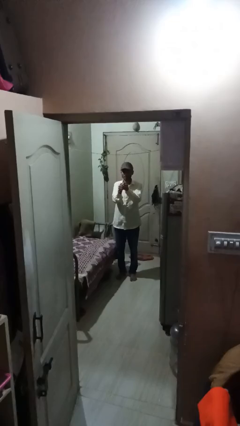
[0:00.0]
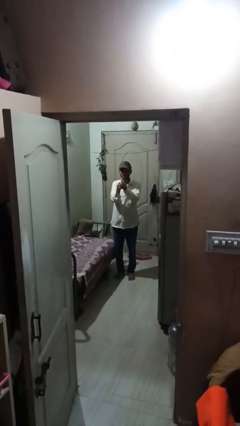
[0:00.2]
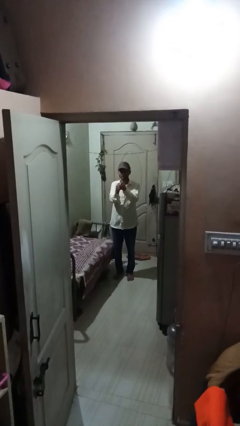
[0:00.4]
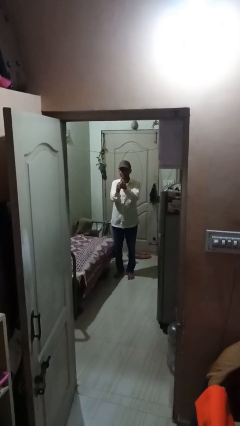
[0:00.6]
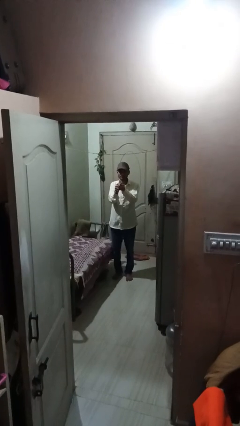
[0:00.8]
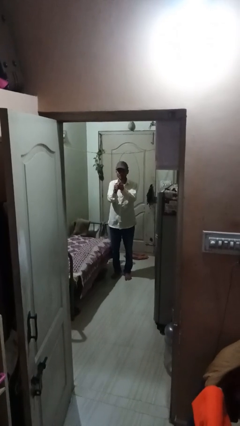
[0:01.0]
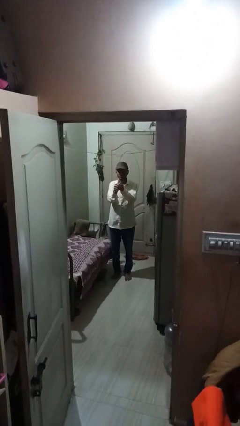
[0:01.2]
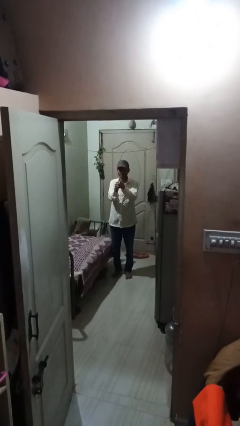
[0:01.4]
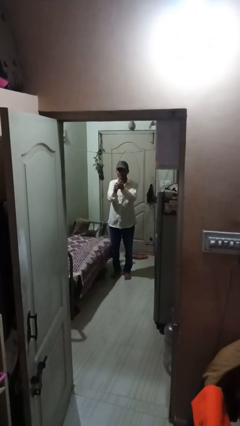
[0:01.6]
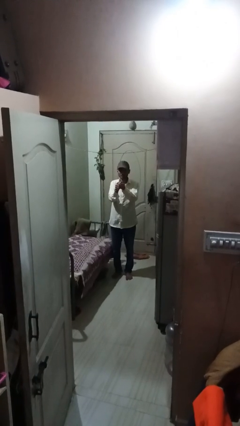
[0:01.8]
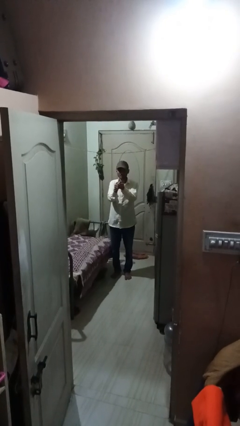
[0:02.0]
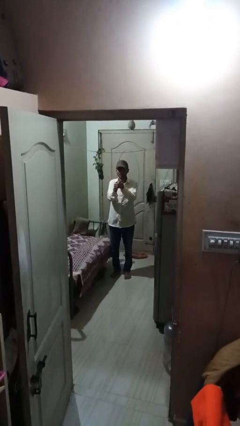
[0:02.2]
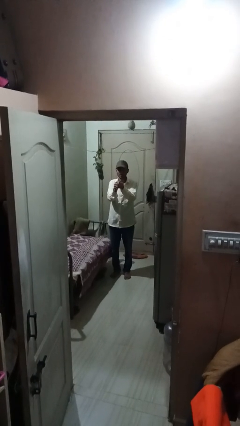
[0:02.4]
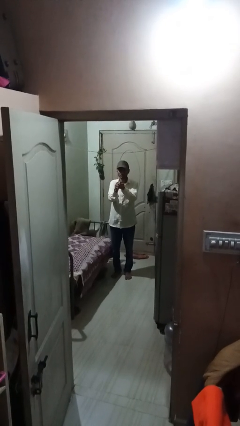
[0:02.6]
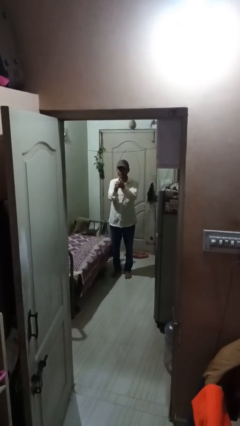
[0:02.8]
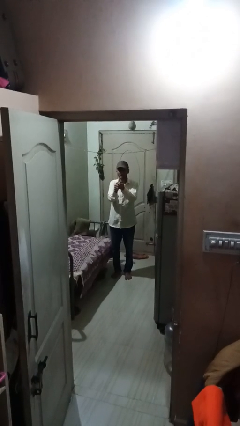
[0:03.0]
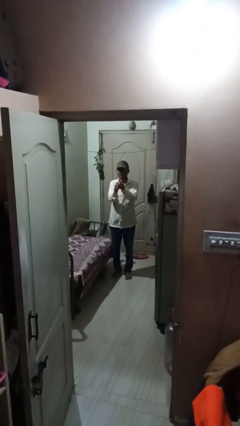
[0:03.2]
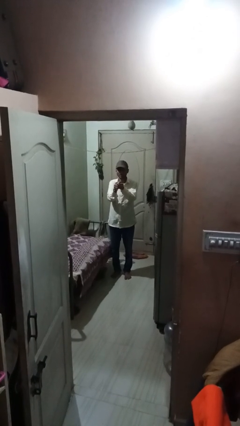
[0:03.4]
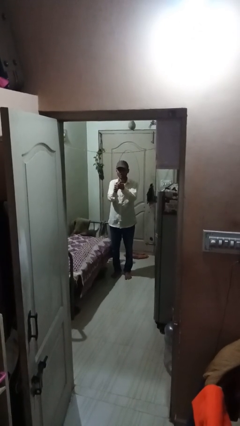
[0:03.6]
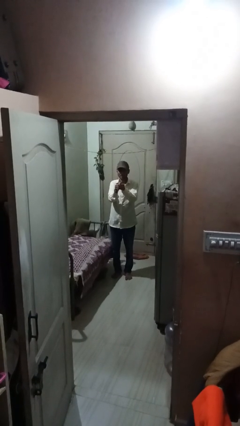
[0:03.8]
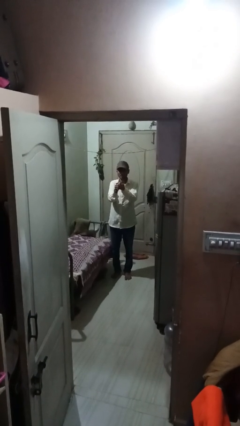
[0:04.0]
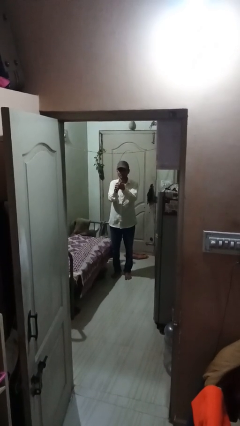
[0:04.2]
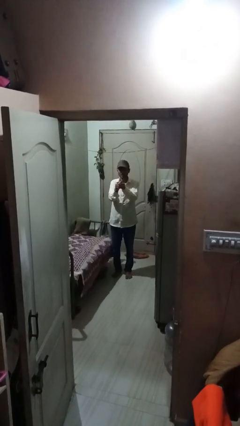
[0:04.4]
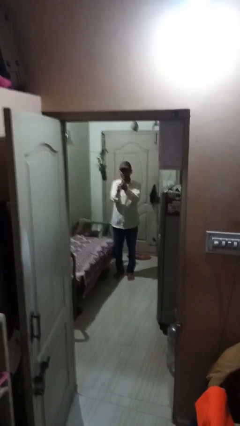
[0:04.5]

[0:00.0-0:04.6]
person gestures zoom in

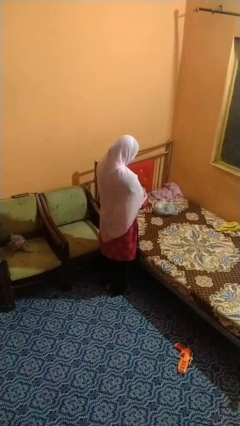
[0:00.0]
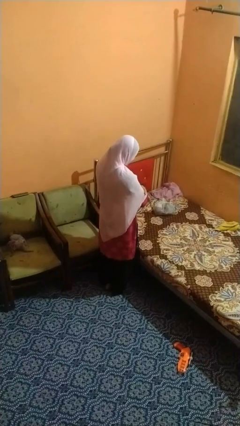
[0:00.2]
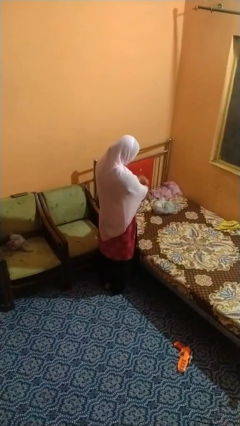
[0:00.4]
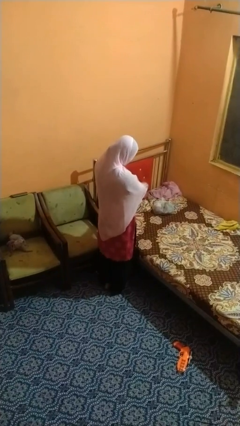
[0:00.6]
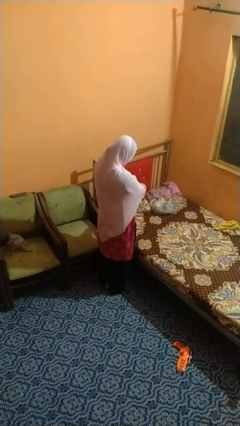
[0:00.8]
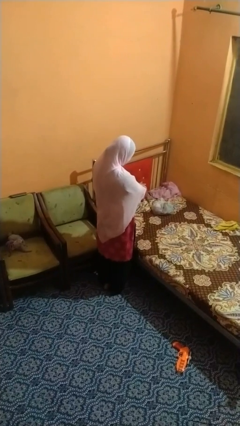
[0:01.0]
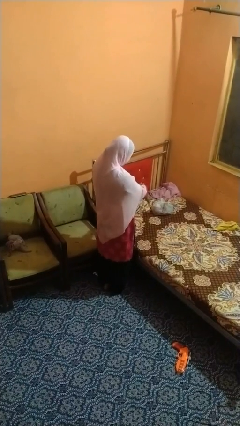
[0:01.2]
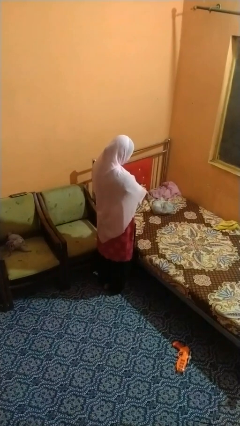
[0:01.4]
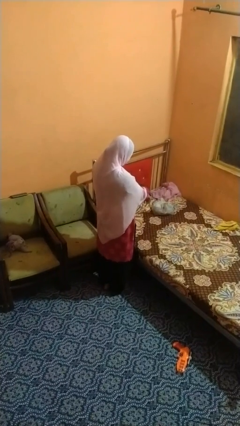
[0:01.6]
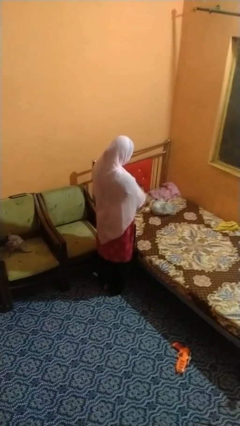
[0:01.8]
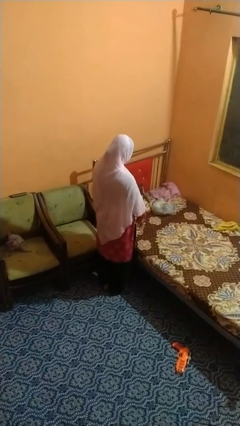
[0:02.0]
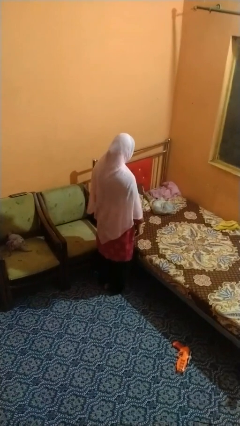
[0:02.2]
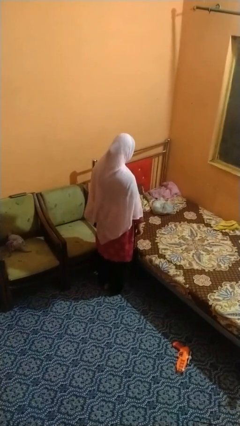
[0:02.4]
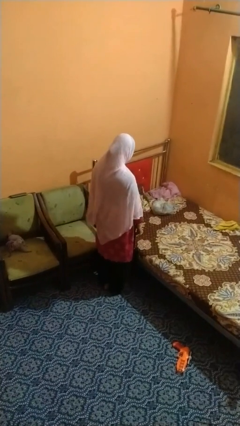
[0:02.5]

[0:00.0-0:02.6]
person swats bug

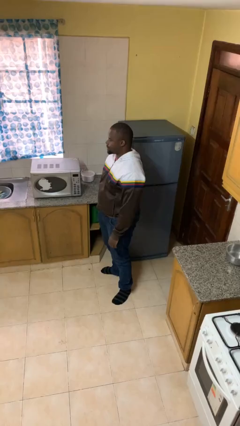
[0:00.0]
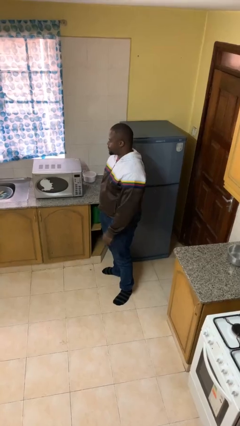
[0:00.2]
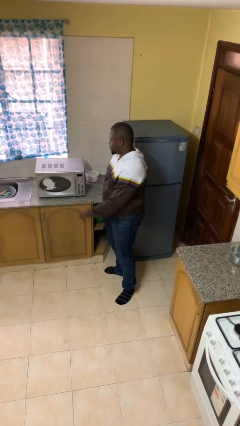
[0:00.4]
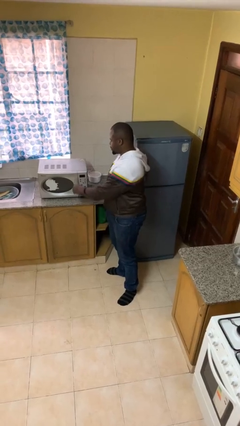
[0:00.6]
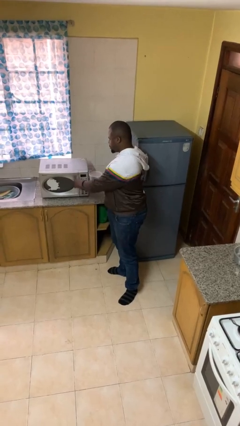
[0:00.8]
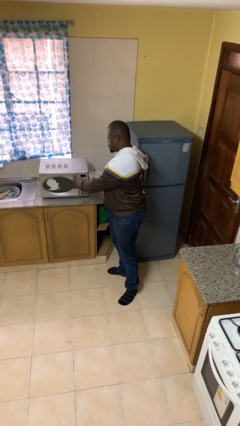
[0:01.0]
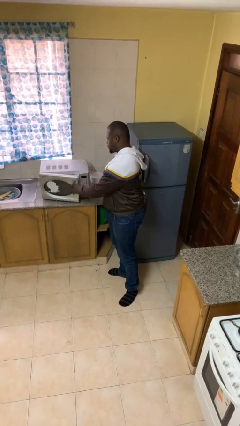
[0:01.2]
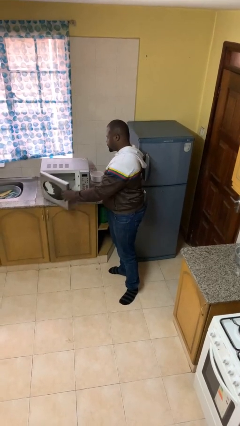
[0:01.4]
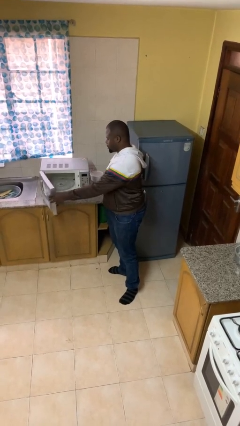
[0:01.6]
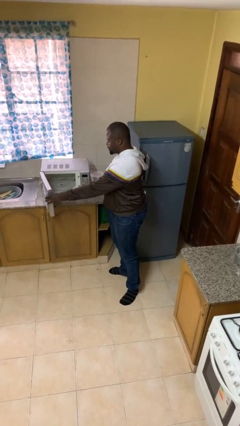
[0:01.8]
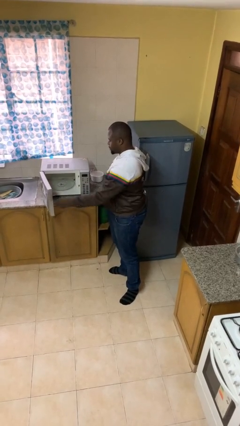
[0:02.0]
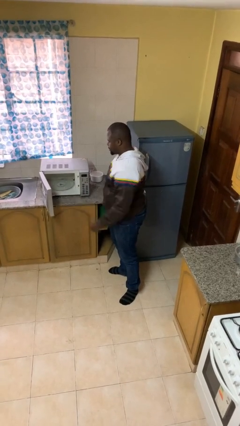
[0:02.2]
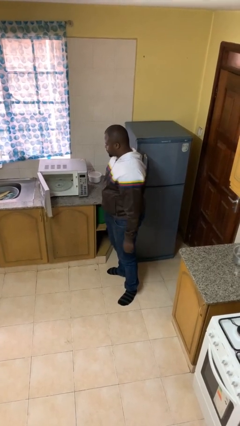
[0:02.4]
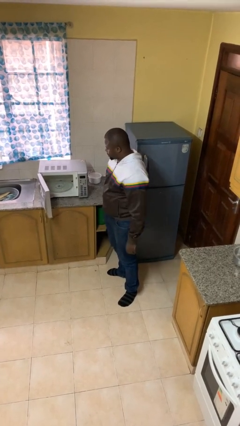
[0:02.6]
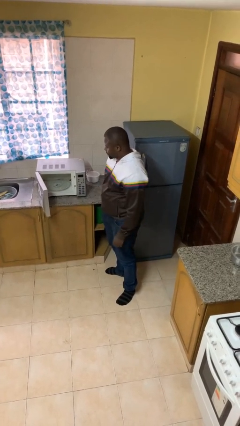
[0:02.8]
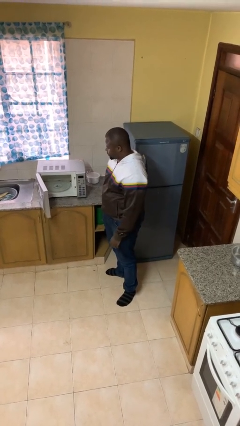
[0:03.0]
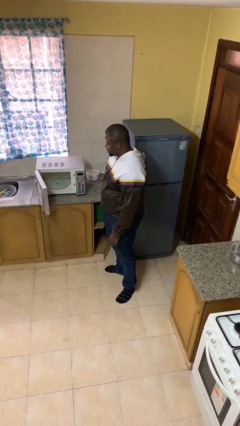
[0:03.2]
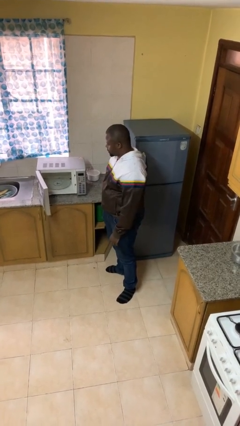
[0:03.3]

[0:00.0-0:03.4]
person opens microwave

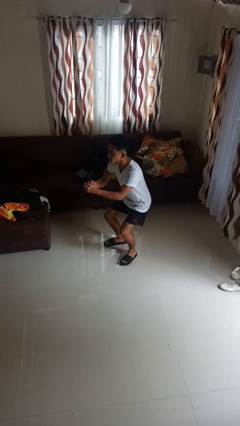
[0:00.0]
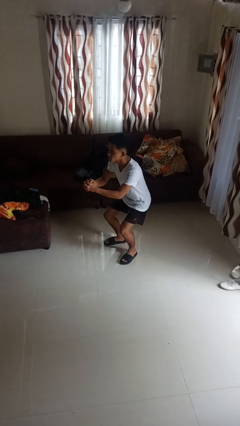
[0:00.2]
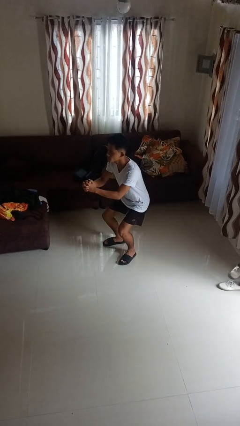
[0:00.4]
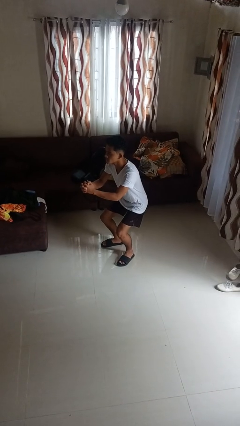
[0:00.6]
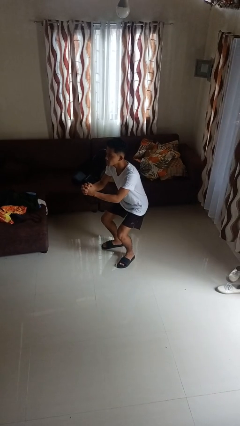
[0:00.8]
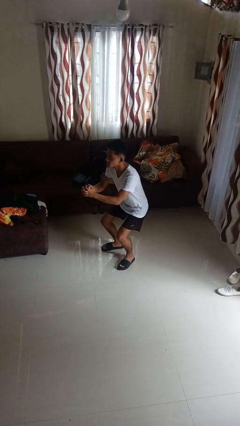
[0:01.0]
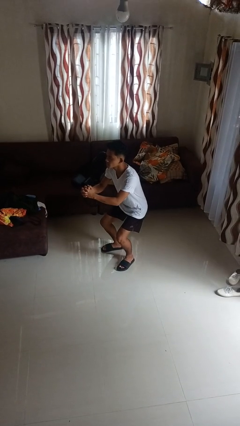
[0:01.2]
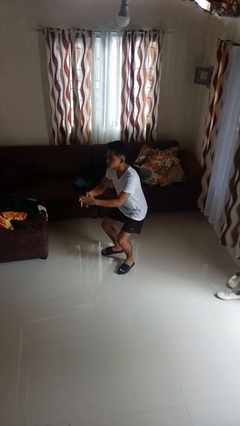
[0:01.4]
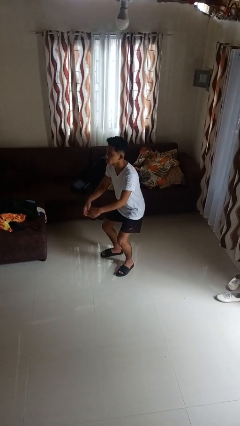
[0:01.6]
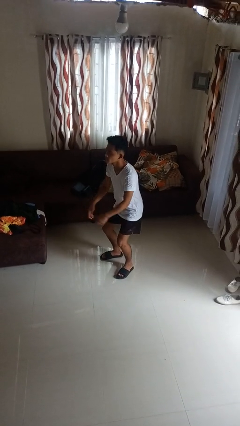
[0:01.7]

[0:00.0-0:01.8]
person squats

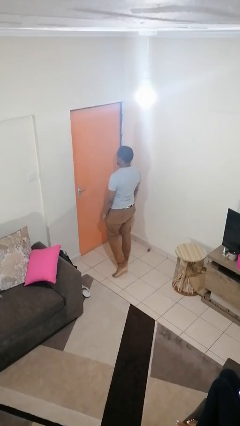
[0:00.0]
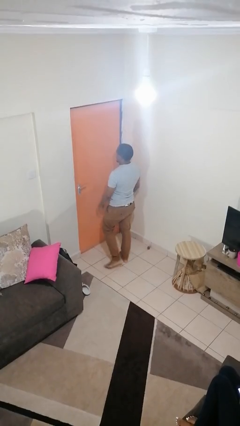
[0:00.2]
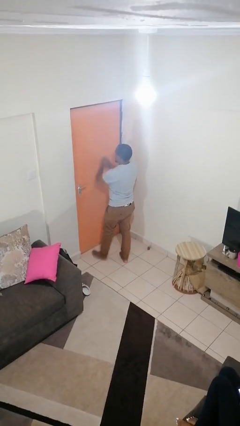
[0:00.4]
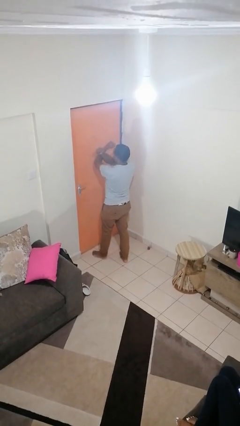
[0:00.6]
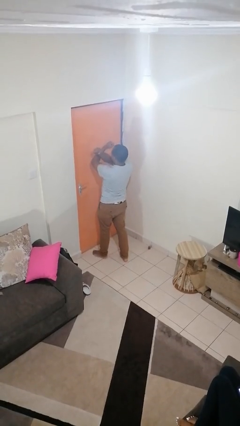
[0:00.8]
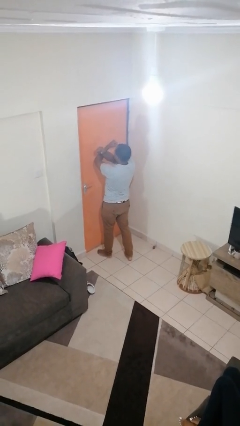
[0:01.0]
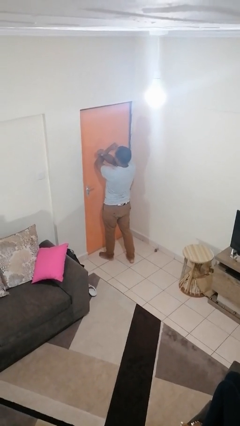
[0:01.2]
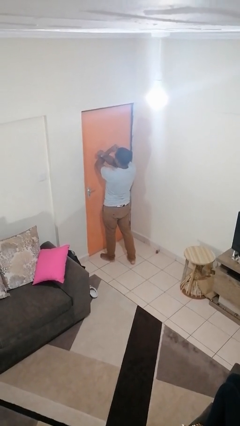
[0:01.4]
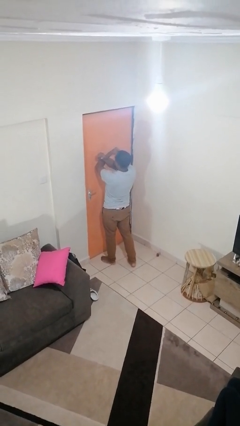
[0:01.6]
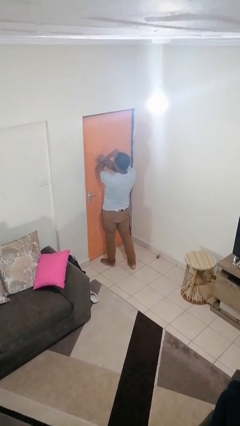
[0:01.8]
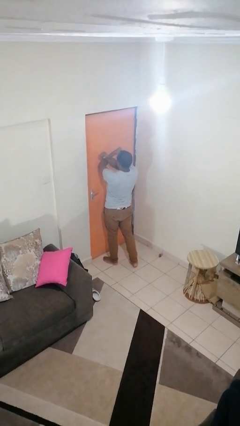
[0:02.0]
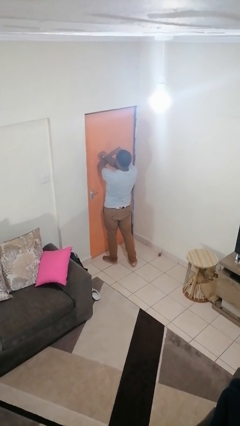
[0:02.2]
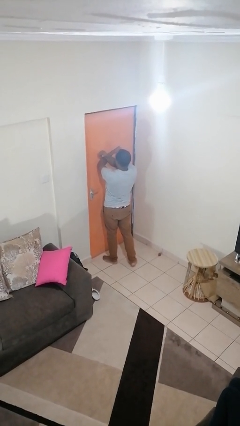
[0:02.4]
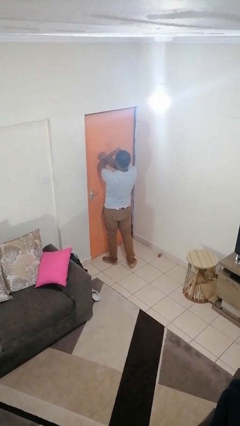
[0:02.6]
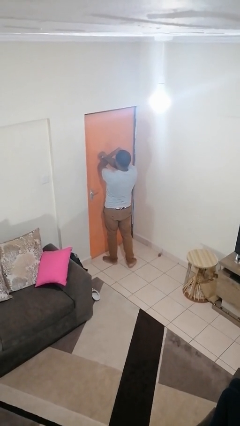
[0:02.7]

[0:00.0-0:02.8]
person gestures arms x

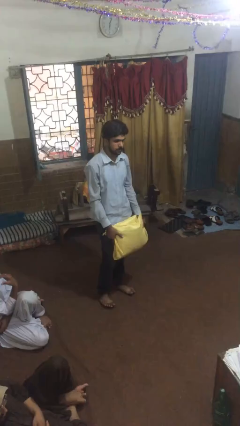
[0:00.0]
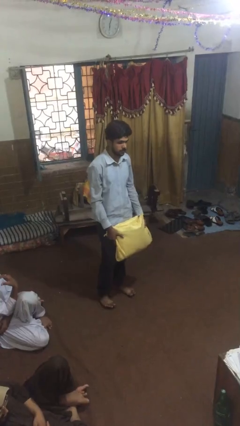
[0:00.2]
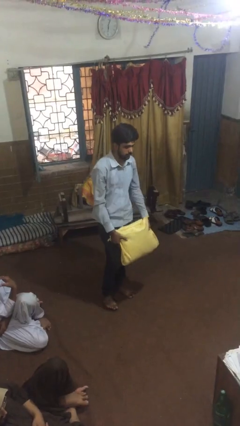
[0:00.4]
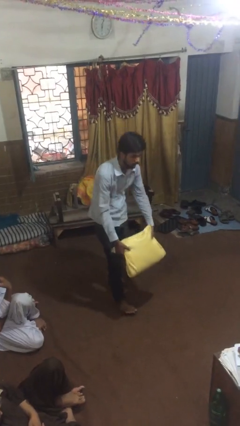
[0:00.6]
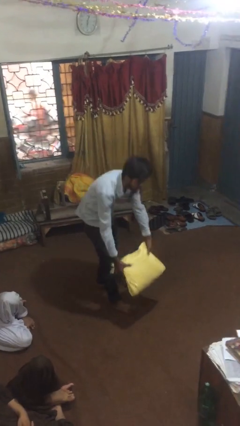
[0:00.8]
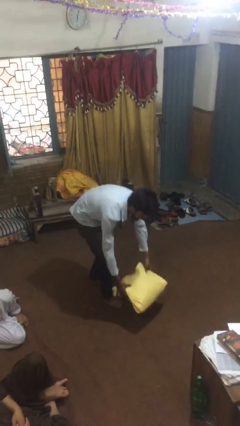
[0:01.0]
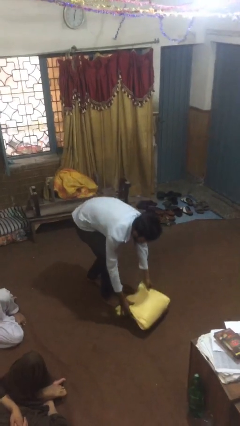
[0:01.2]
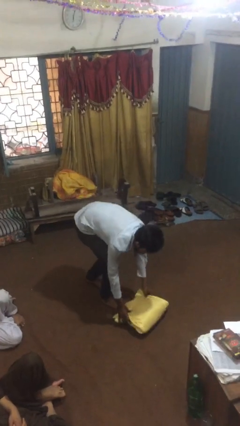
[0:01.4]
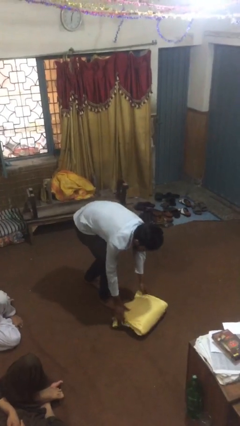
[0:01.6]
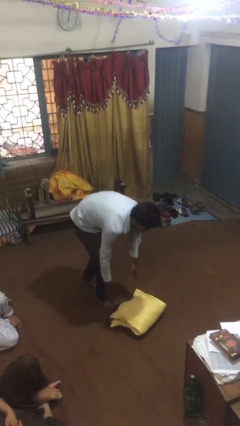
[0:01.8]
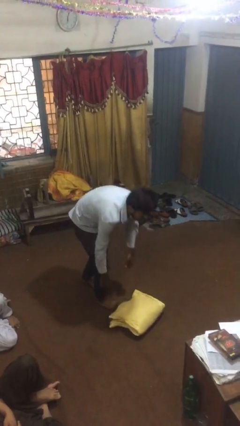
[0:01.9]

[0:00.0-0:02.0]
person puts down object on floor
